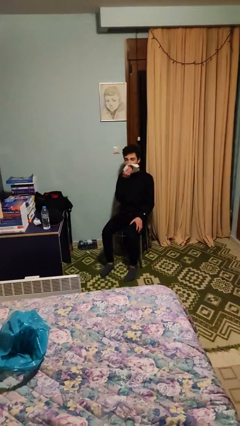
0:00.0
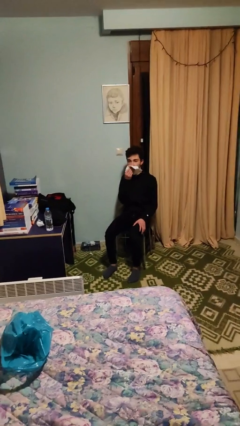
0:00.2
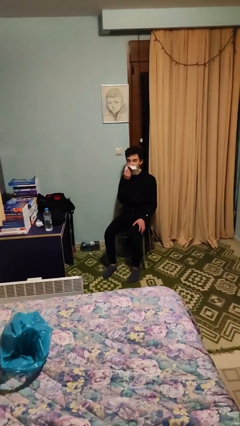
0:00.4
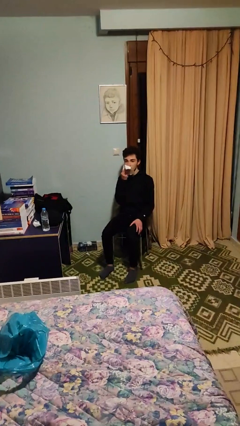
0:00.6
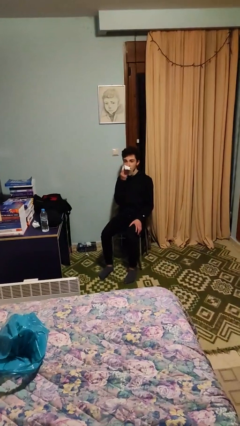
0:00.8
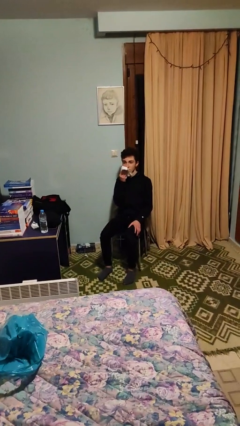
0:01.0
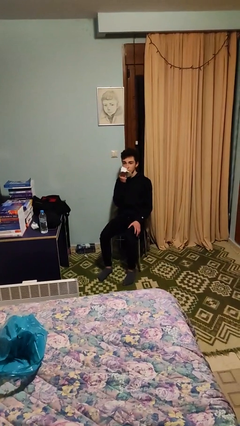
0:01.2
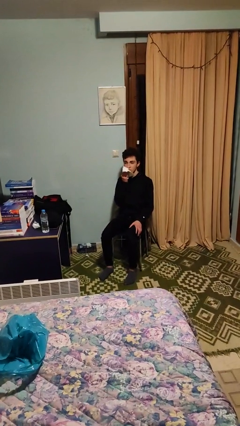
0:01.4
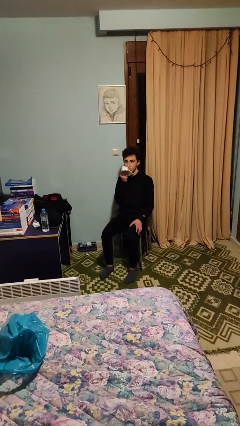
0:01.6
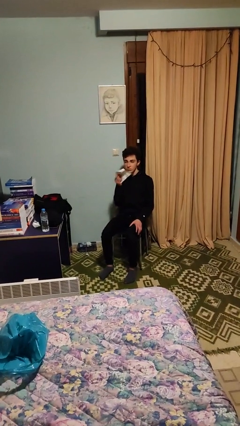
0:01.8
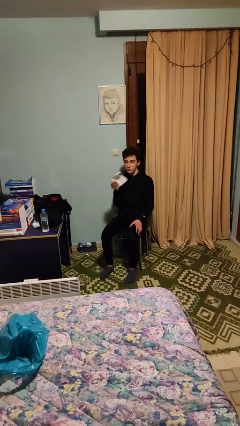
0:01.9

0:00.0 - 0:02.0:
person wipes mouth with napkin

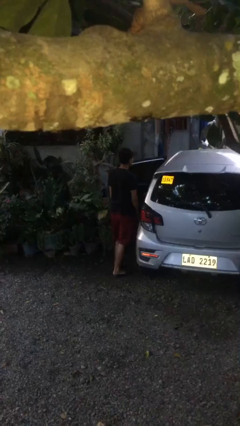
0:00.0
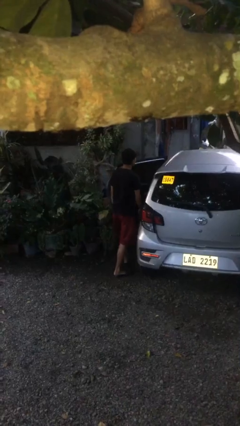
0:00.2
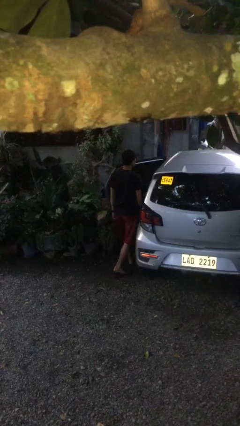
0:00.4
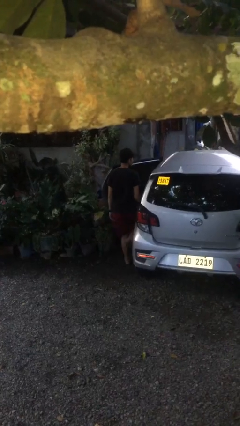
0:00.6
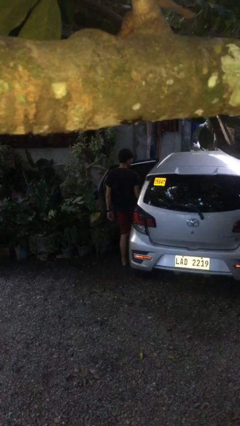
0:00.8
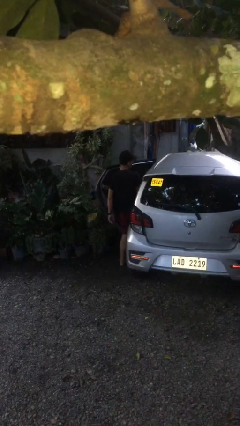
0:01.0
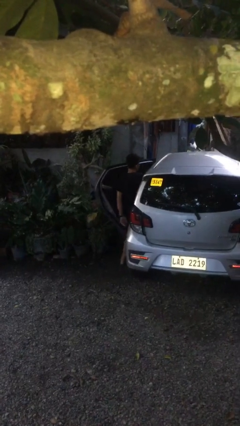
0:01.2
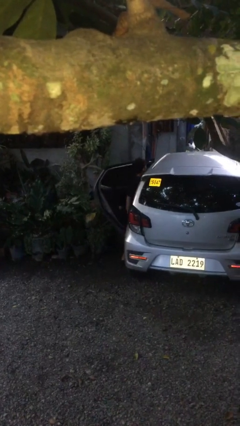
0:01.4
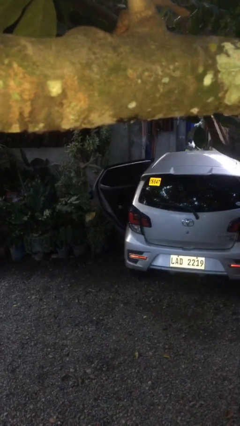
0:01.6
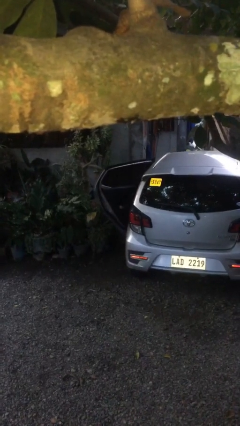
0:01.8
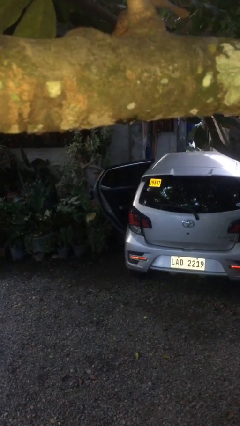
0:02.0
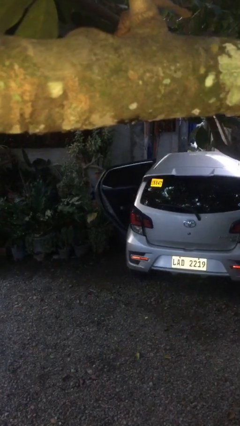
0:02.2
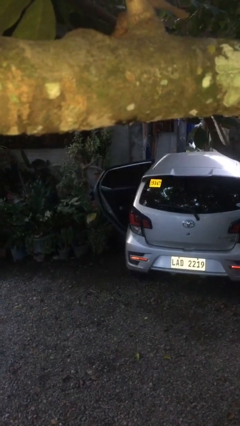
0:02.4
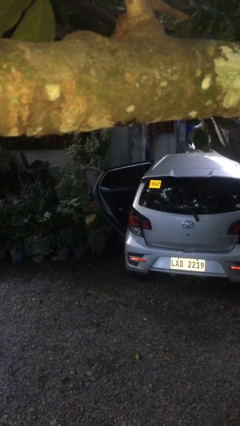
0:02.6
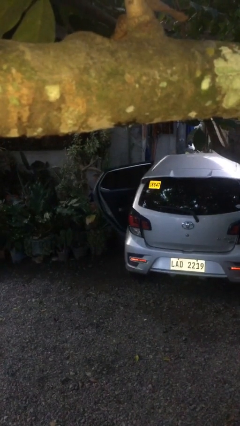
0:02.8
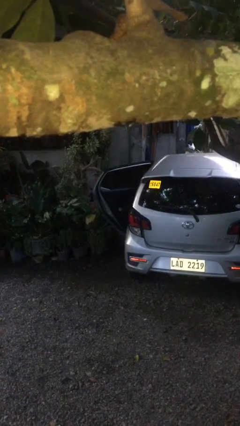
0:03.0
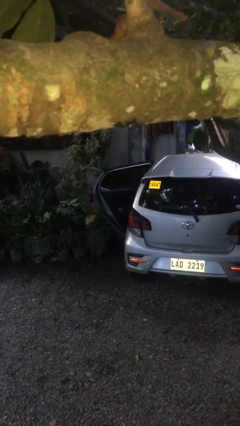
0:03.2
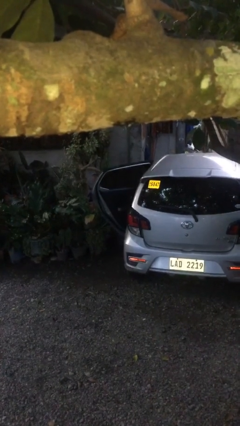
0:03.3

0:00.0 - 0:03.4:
person enters car

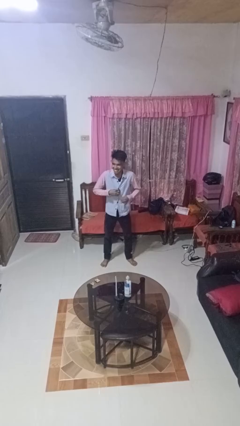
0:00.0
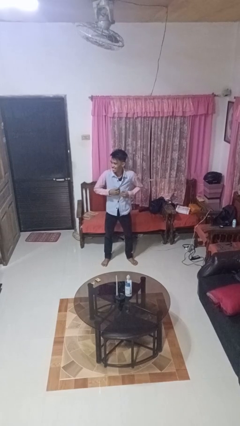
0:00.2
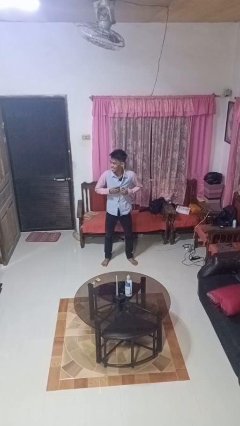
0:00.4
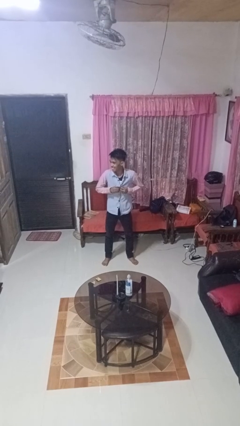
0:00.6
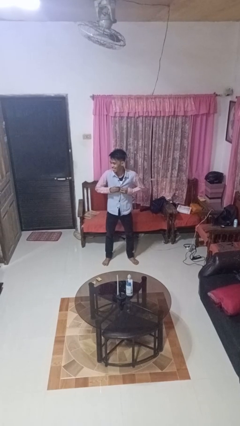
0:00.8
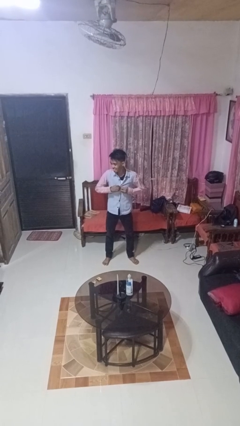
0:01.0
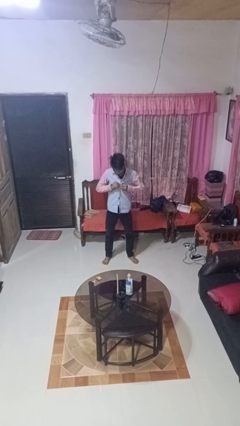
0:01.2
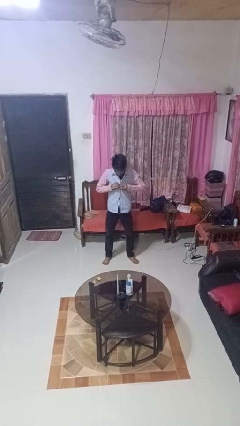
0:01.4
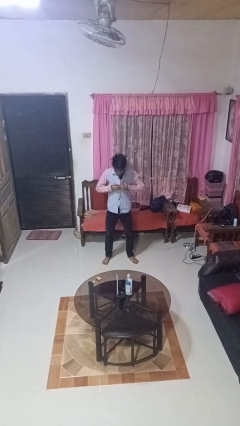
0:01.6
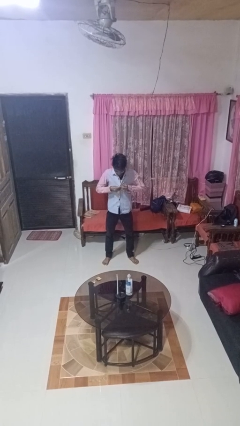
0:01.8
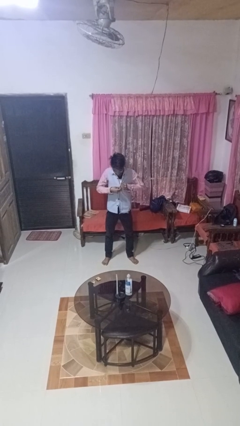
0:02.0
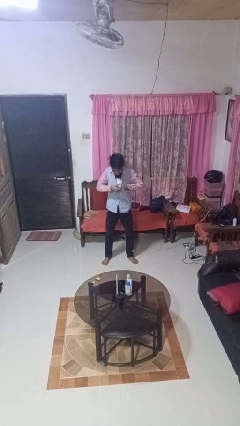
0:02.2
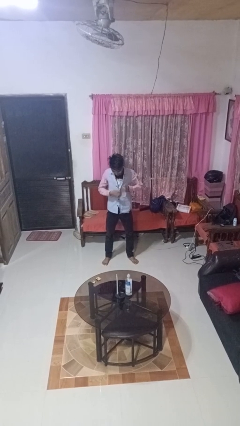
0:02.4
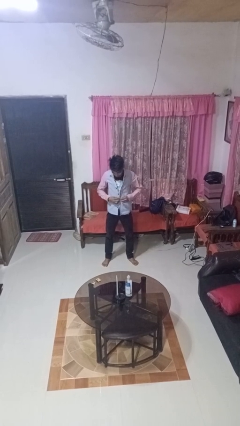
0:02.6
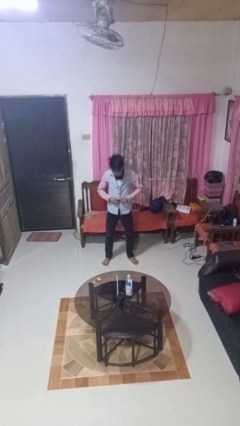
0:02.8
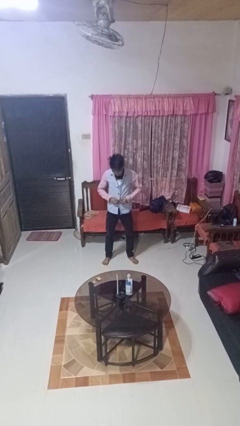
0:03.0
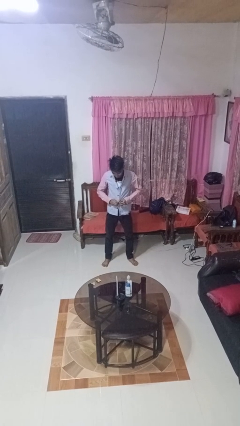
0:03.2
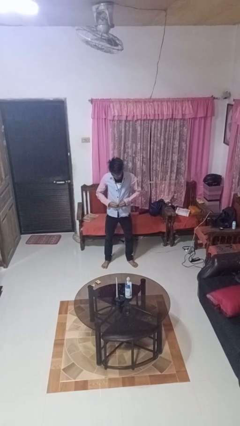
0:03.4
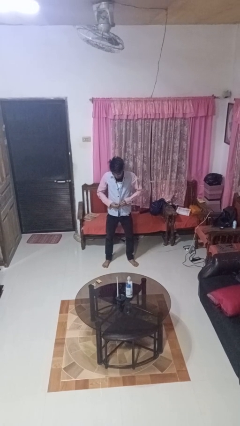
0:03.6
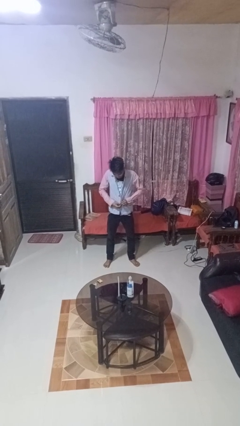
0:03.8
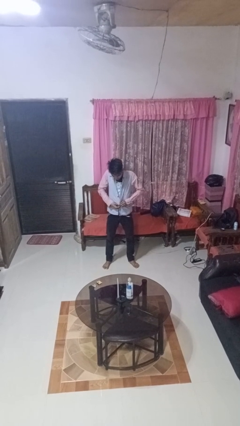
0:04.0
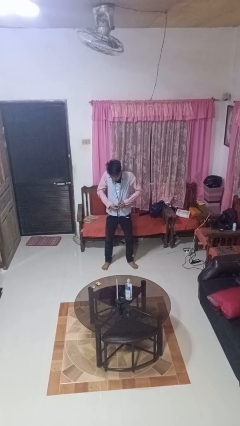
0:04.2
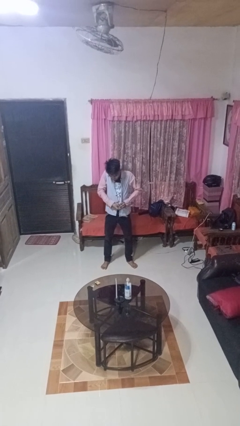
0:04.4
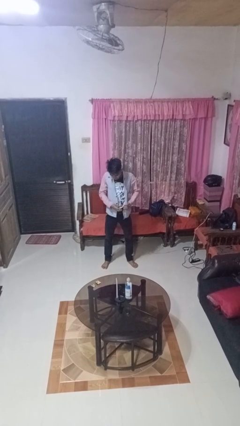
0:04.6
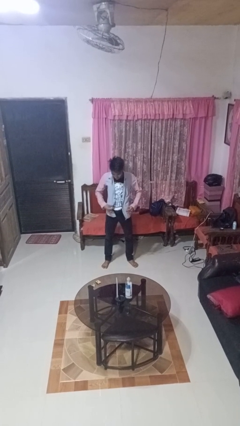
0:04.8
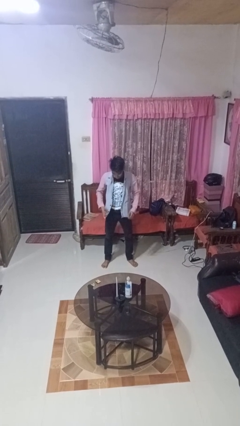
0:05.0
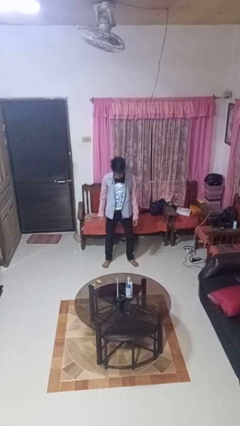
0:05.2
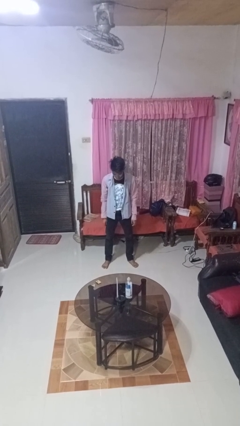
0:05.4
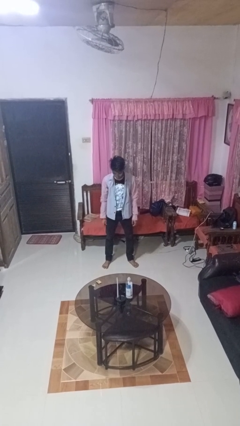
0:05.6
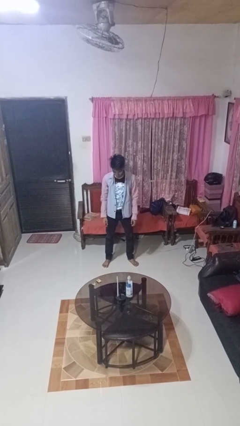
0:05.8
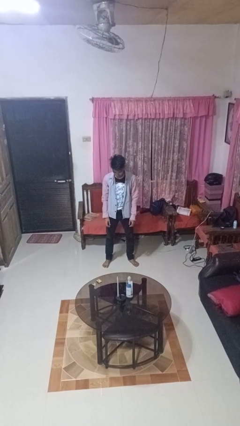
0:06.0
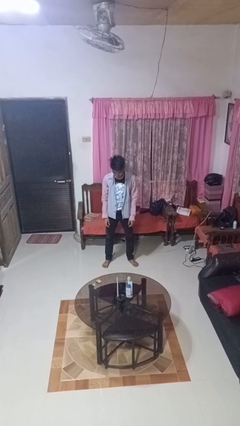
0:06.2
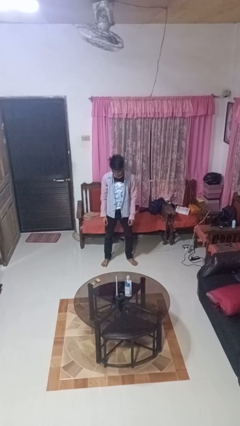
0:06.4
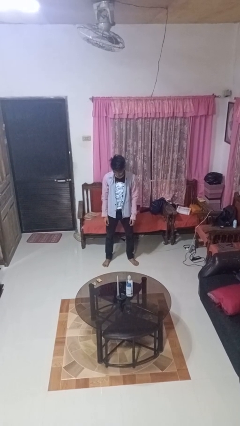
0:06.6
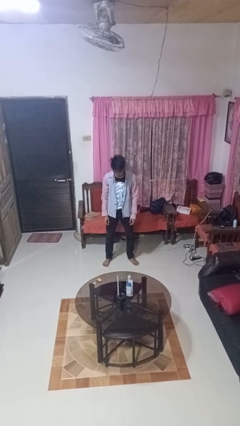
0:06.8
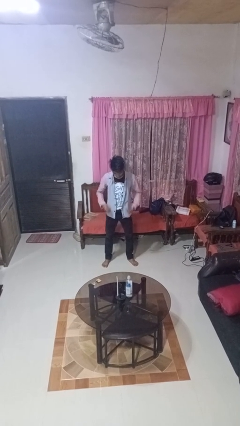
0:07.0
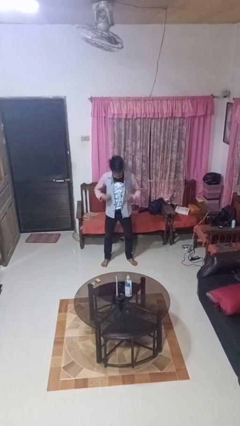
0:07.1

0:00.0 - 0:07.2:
person unbuttons shirt

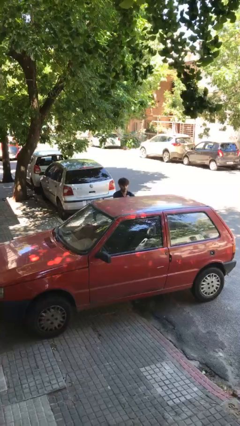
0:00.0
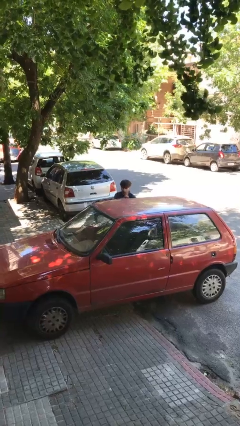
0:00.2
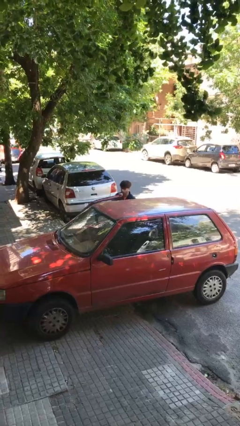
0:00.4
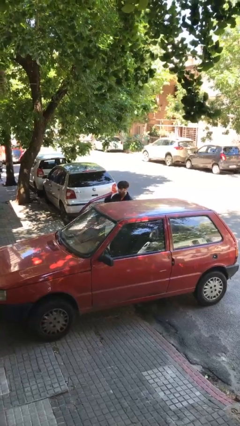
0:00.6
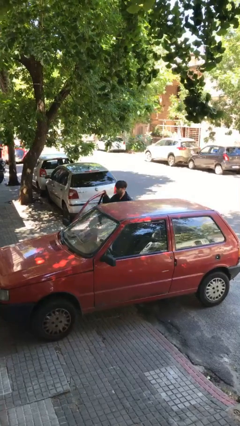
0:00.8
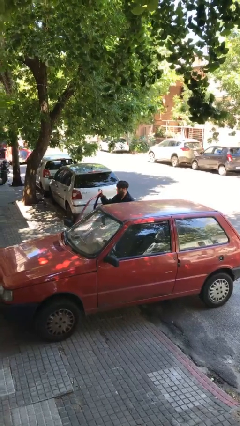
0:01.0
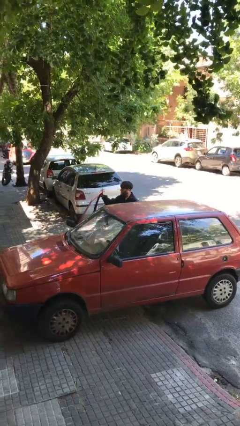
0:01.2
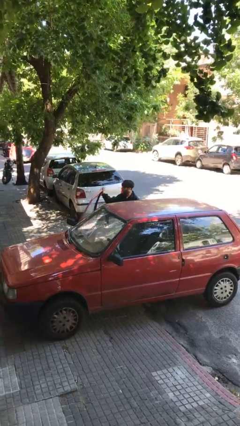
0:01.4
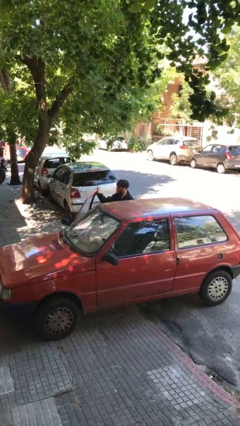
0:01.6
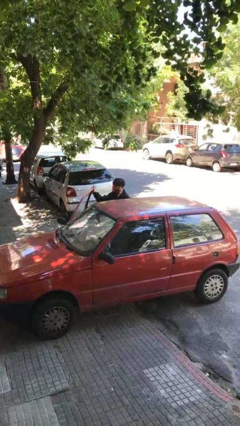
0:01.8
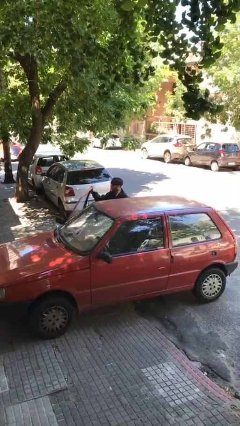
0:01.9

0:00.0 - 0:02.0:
person opens car door

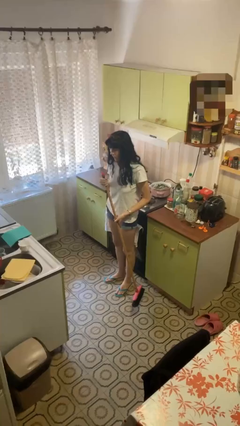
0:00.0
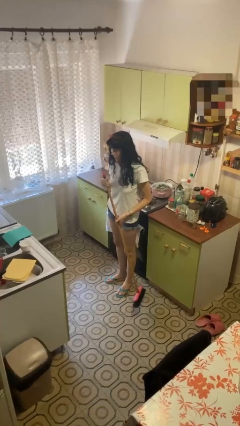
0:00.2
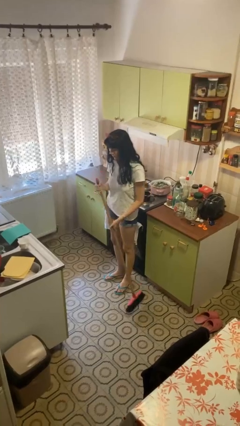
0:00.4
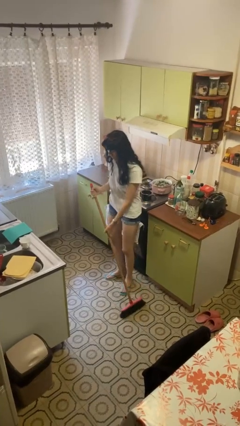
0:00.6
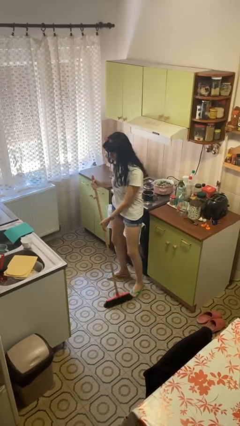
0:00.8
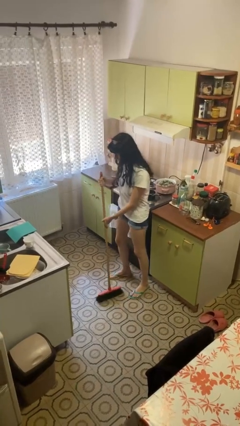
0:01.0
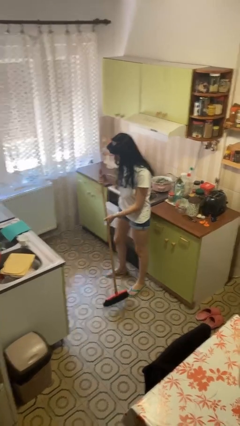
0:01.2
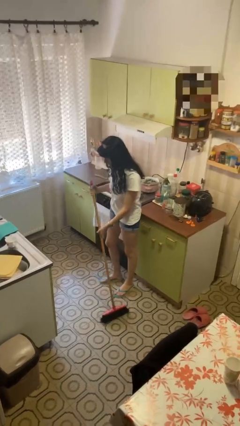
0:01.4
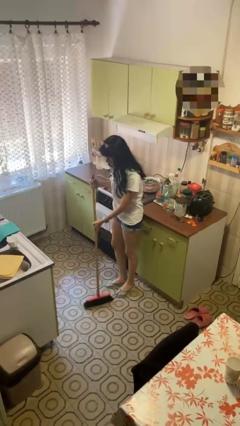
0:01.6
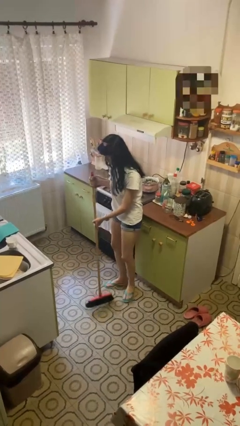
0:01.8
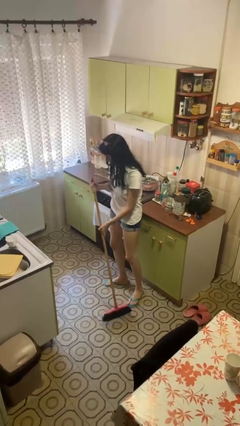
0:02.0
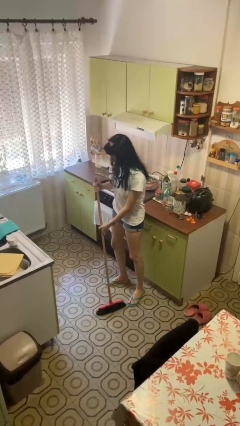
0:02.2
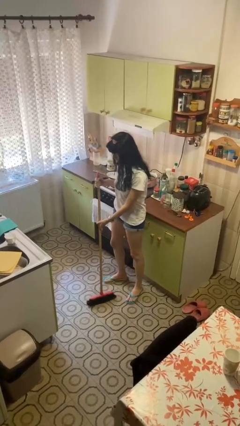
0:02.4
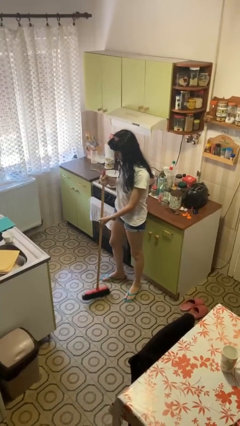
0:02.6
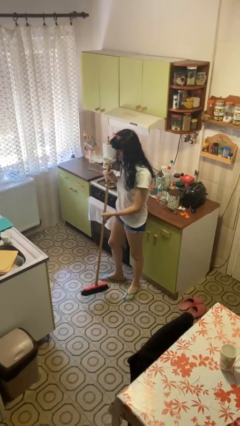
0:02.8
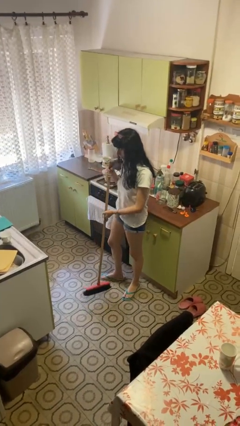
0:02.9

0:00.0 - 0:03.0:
person sweeps floor
